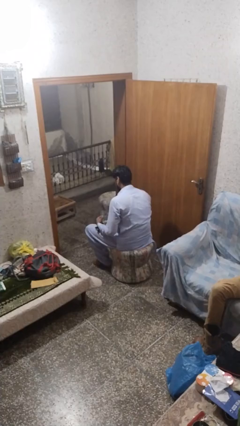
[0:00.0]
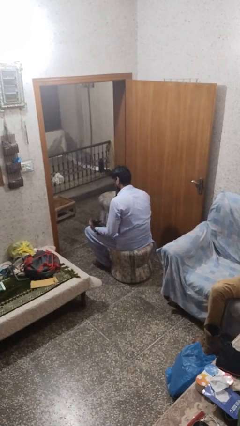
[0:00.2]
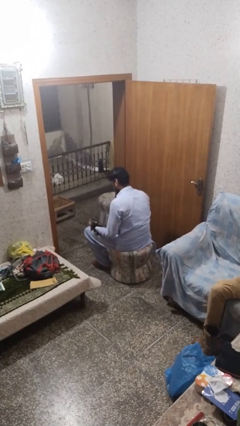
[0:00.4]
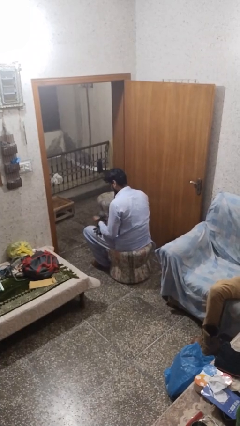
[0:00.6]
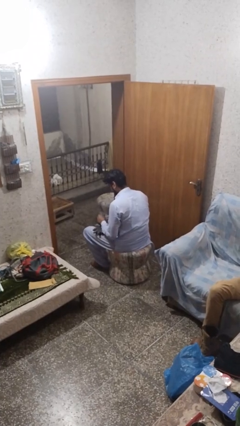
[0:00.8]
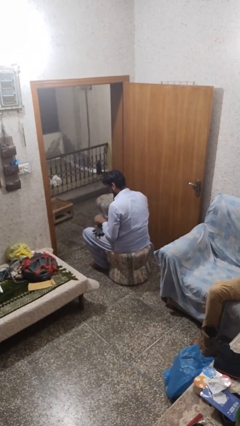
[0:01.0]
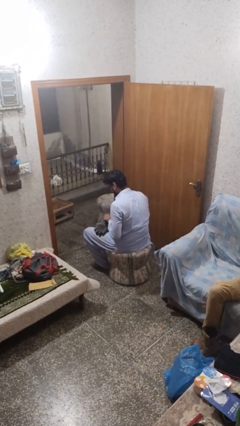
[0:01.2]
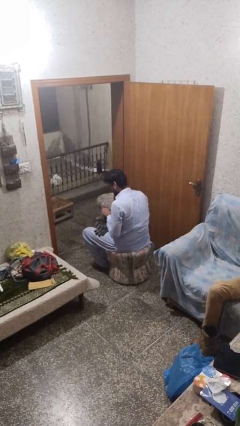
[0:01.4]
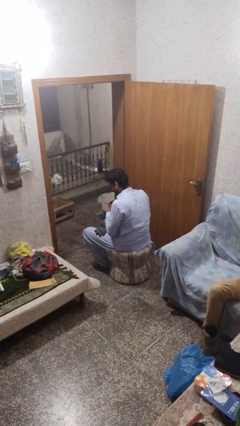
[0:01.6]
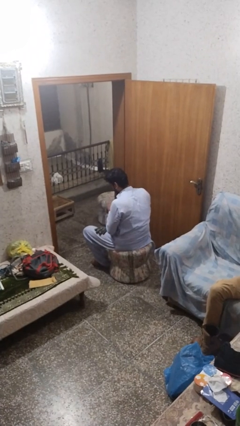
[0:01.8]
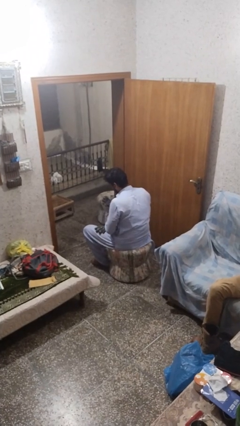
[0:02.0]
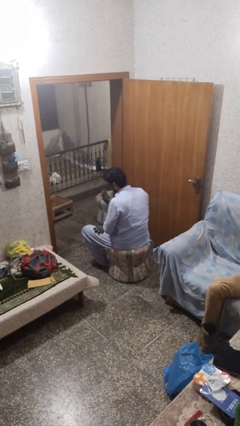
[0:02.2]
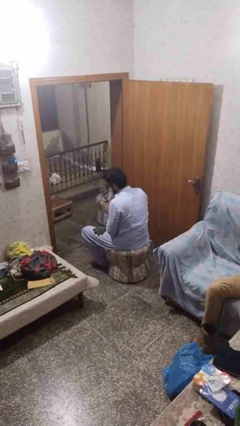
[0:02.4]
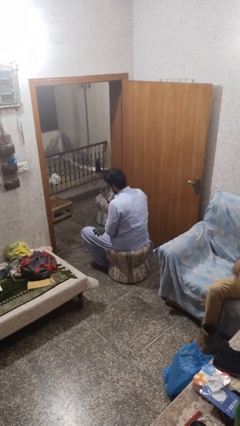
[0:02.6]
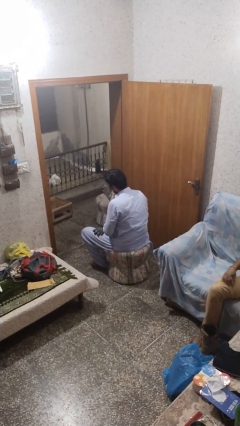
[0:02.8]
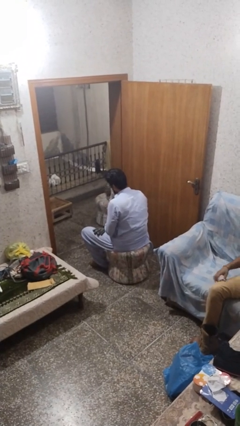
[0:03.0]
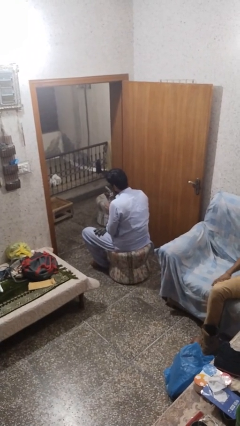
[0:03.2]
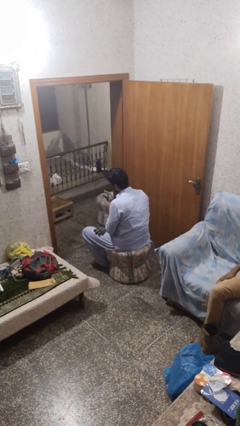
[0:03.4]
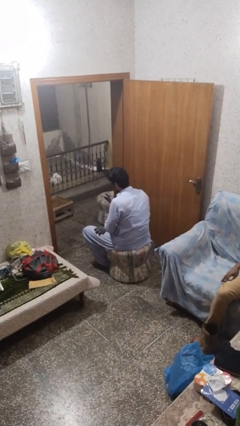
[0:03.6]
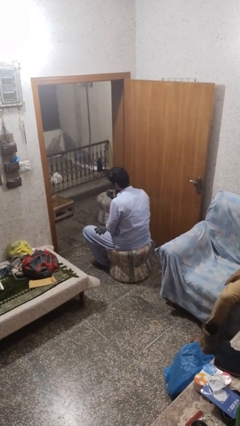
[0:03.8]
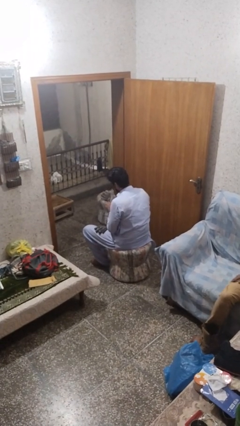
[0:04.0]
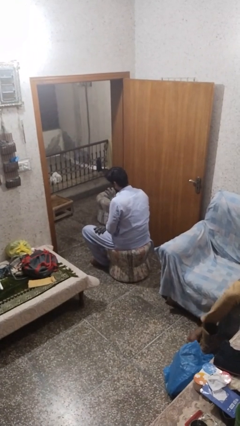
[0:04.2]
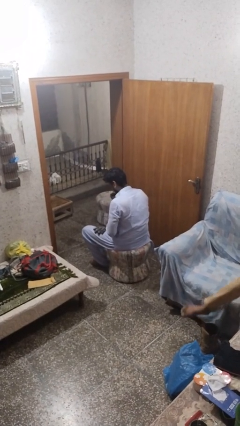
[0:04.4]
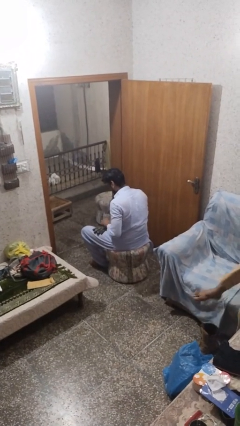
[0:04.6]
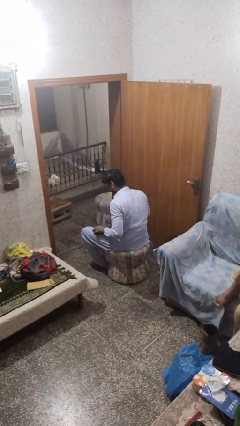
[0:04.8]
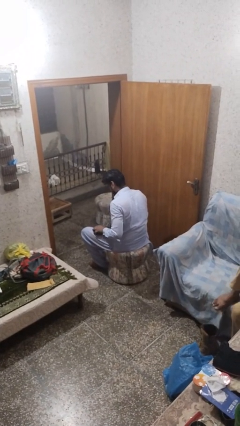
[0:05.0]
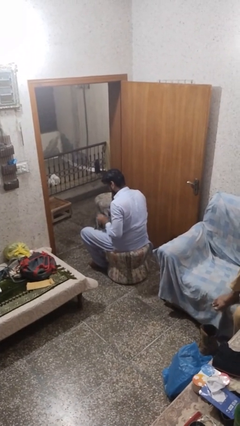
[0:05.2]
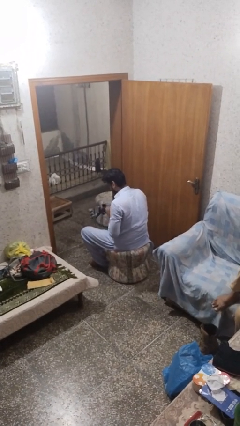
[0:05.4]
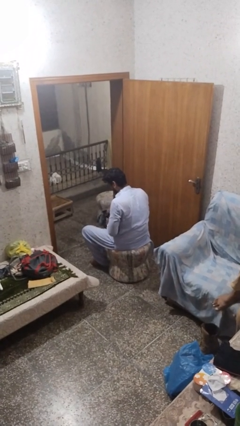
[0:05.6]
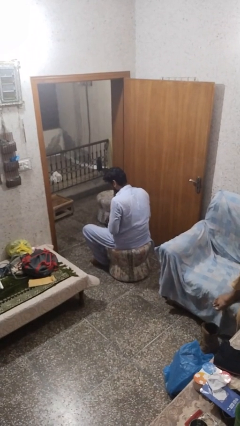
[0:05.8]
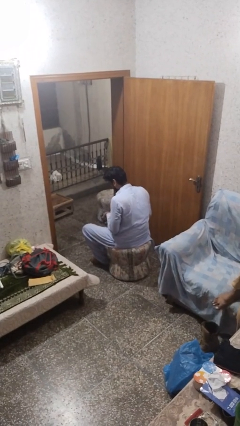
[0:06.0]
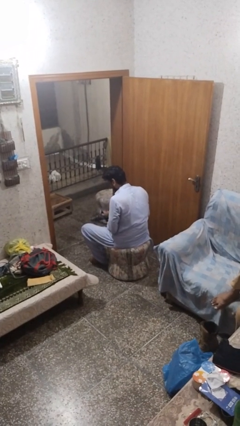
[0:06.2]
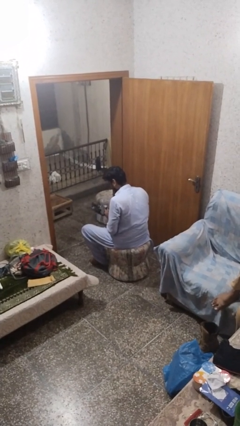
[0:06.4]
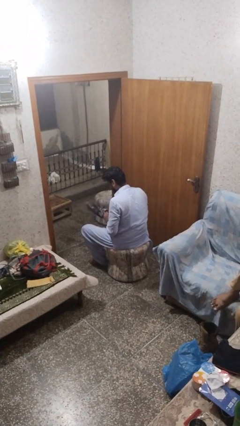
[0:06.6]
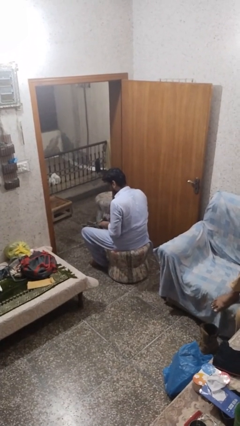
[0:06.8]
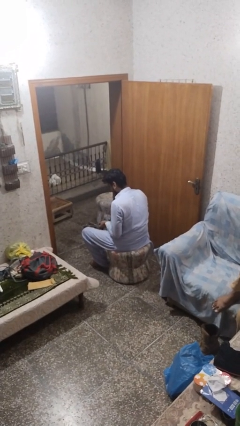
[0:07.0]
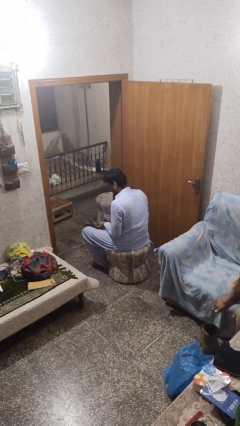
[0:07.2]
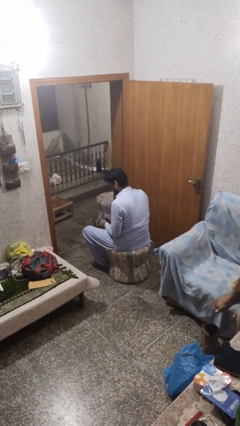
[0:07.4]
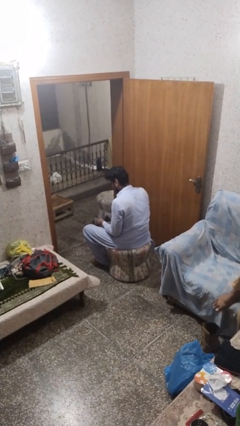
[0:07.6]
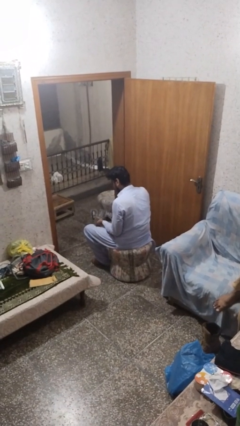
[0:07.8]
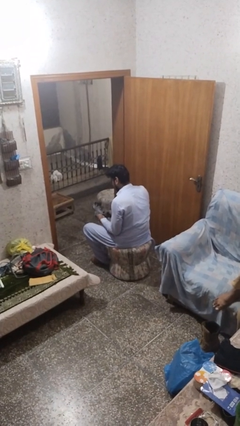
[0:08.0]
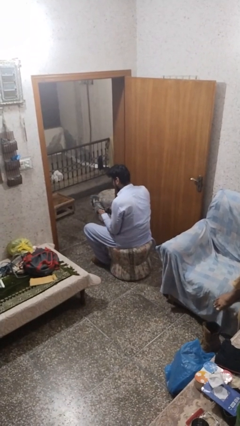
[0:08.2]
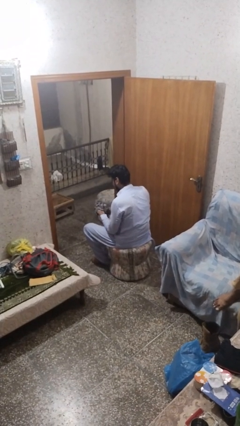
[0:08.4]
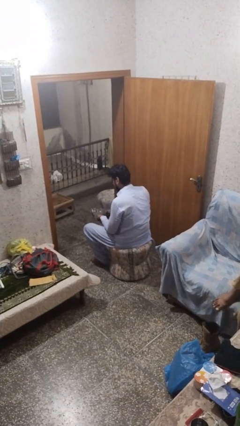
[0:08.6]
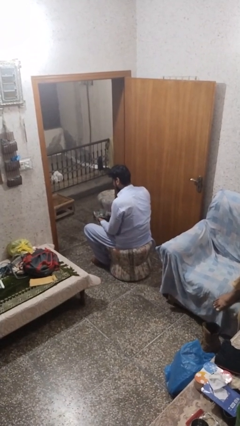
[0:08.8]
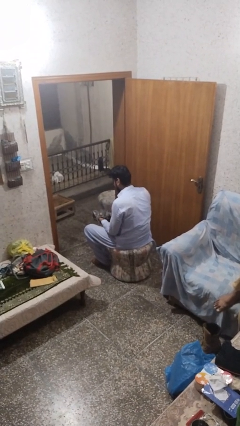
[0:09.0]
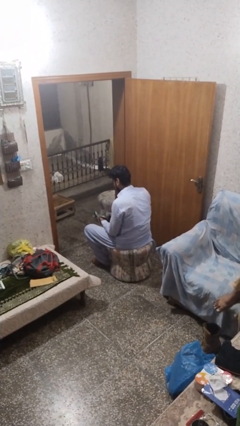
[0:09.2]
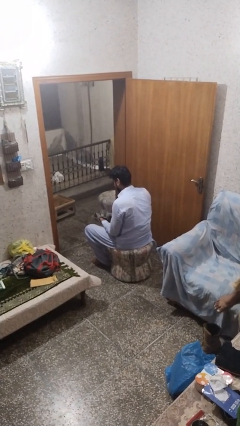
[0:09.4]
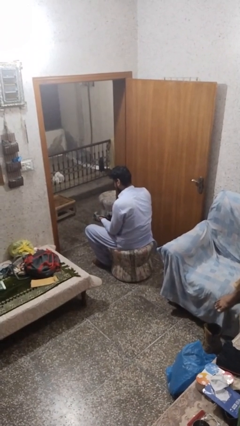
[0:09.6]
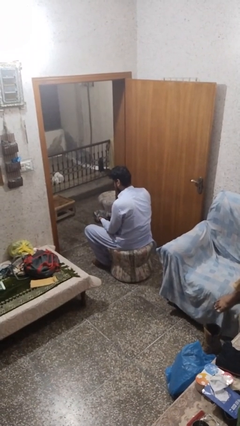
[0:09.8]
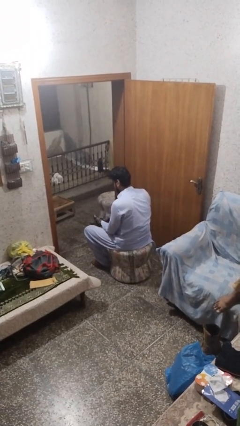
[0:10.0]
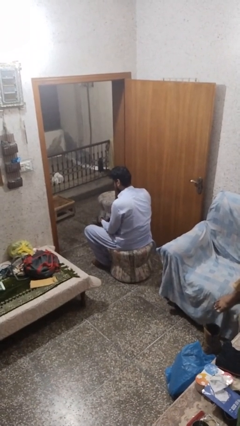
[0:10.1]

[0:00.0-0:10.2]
person puts on gloves

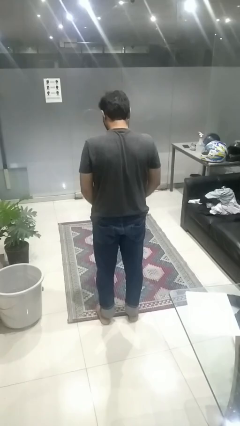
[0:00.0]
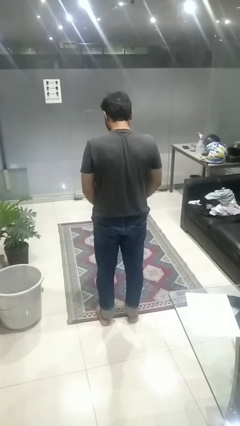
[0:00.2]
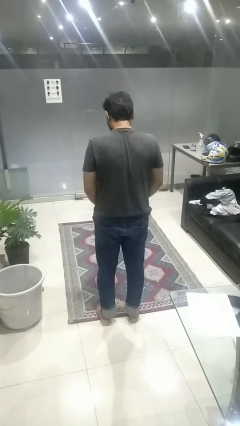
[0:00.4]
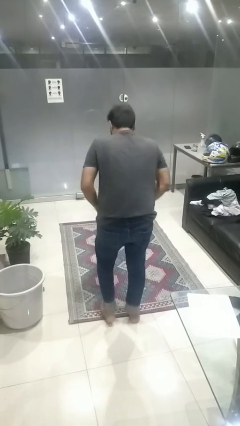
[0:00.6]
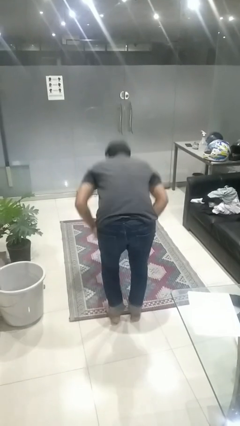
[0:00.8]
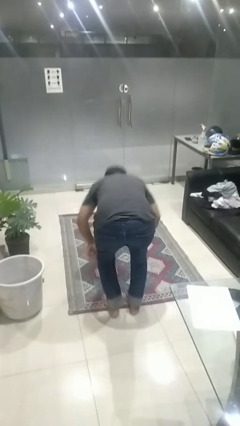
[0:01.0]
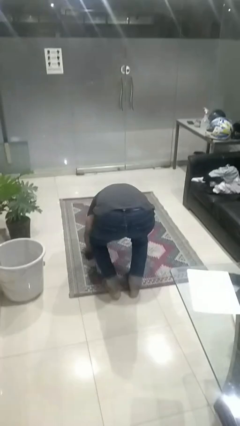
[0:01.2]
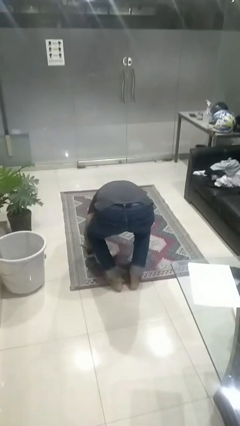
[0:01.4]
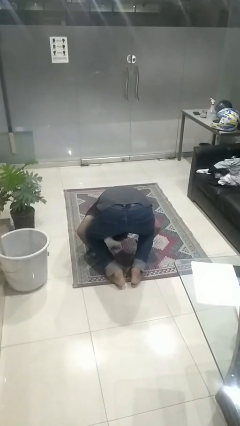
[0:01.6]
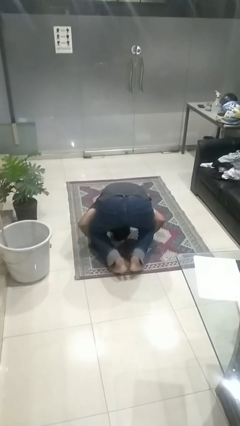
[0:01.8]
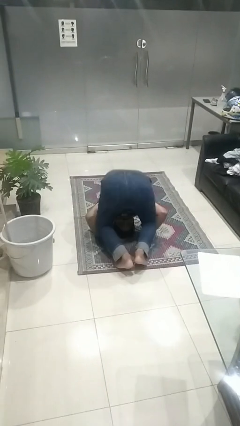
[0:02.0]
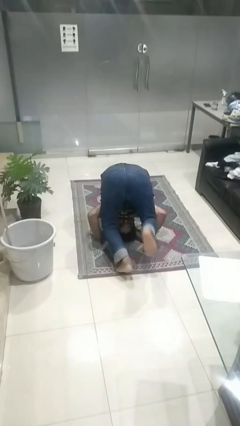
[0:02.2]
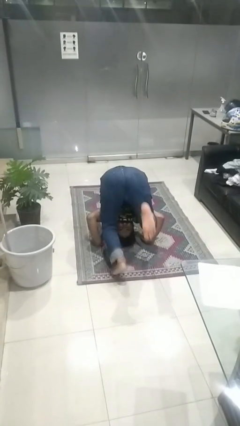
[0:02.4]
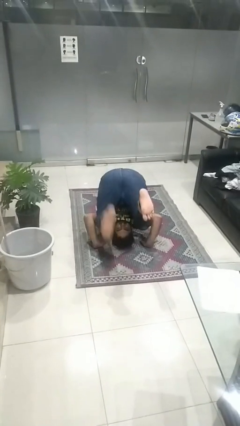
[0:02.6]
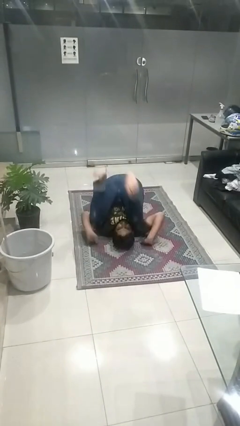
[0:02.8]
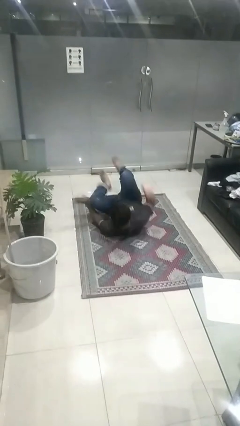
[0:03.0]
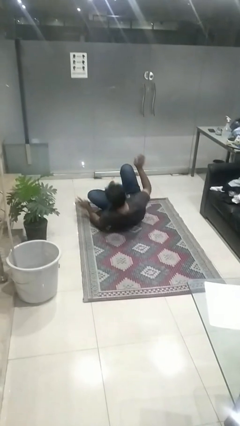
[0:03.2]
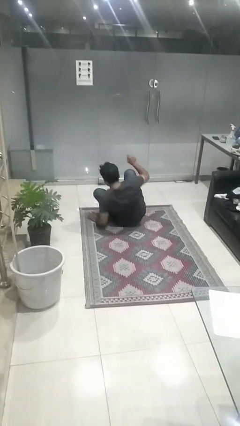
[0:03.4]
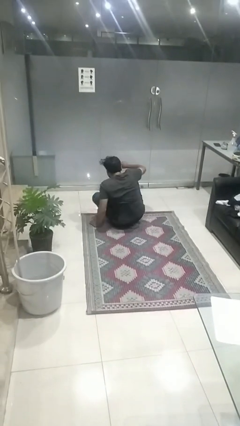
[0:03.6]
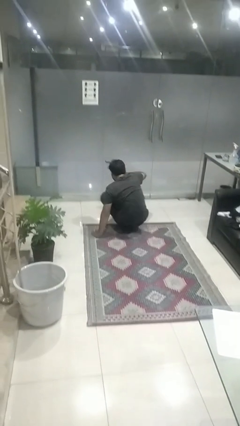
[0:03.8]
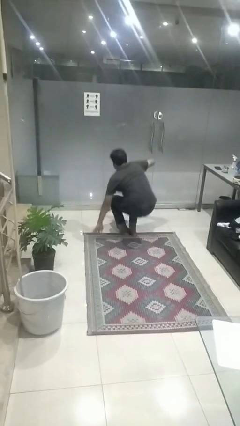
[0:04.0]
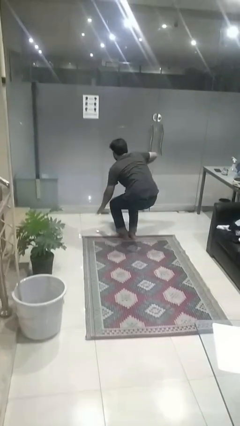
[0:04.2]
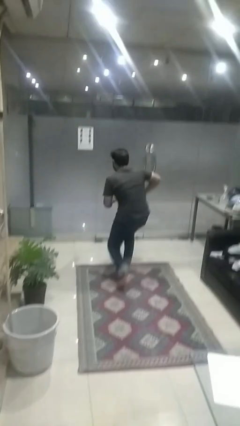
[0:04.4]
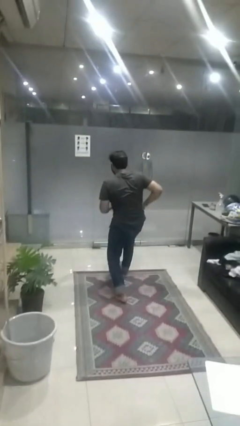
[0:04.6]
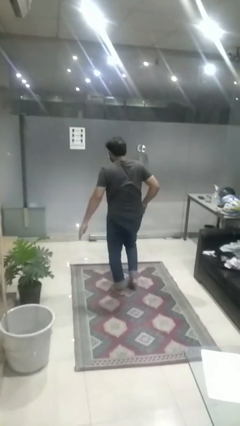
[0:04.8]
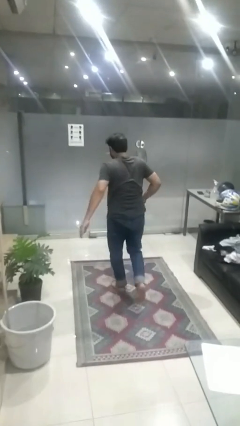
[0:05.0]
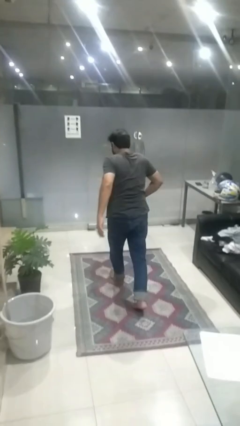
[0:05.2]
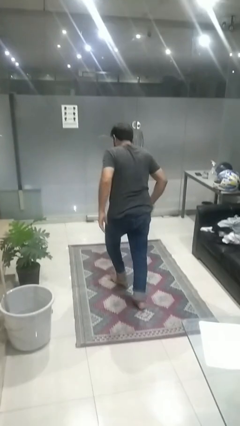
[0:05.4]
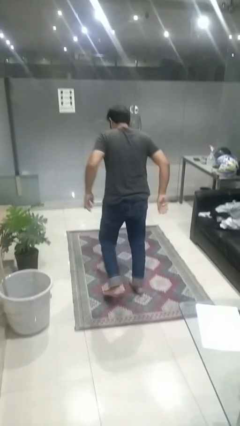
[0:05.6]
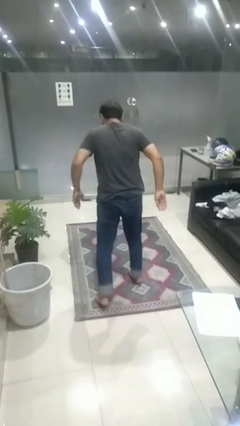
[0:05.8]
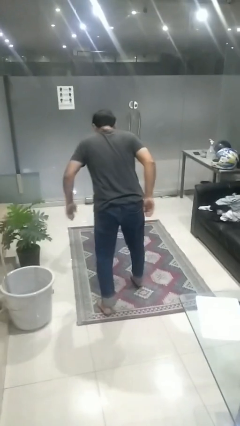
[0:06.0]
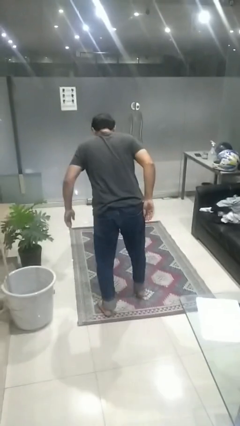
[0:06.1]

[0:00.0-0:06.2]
person somersaults

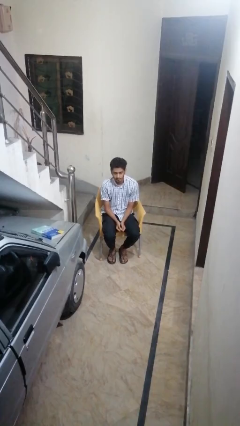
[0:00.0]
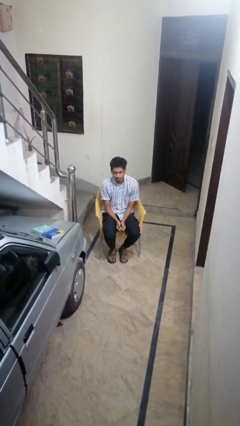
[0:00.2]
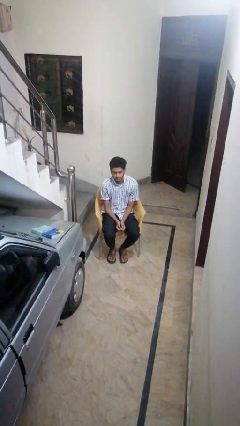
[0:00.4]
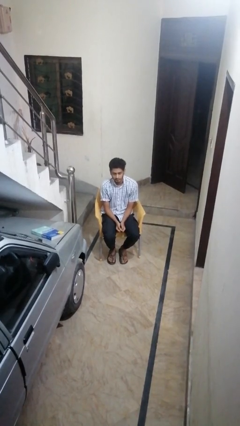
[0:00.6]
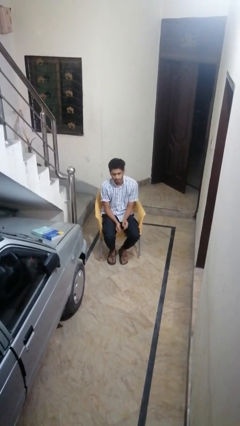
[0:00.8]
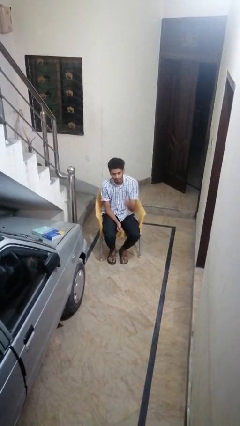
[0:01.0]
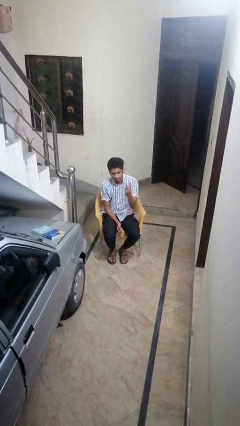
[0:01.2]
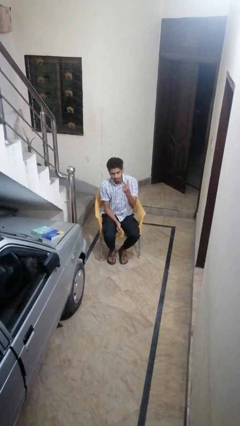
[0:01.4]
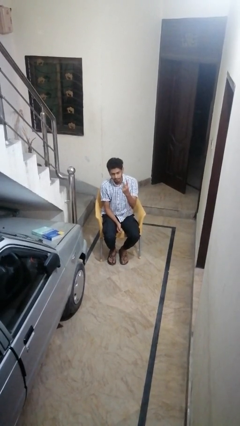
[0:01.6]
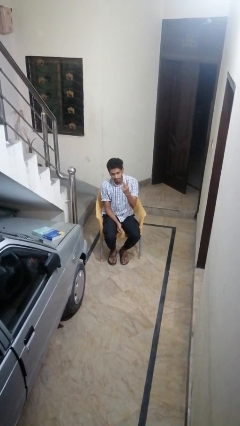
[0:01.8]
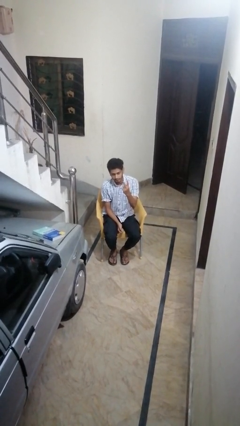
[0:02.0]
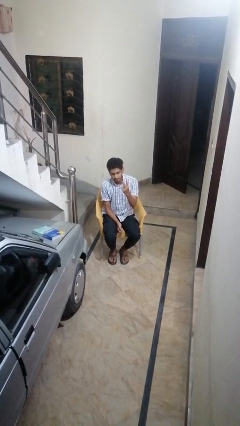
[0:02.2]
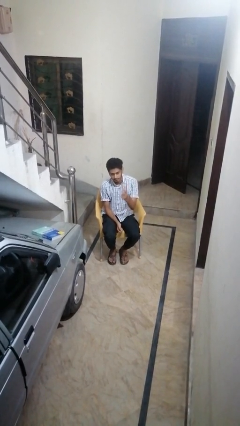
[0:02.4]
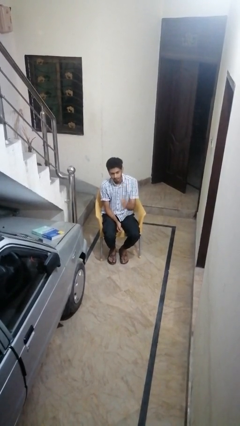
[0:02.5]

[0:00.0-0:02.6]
person gestures peace
